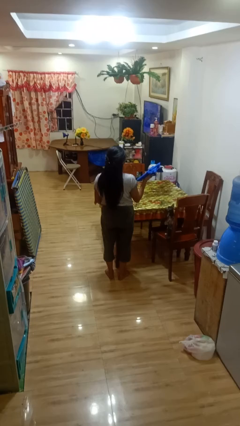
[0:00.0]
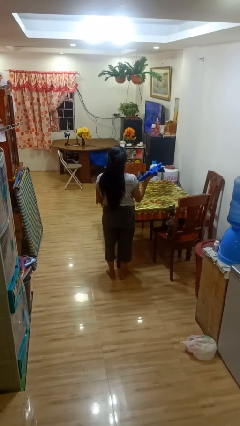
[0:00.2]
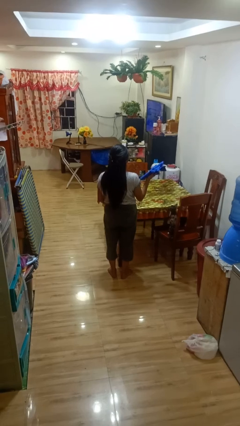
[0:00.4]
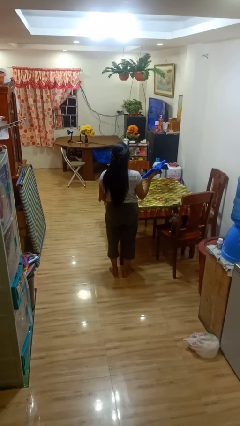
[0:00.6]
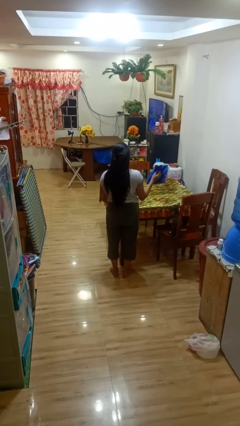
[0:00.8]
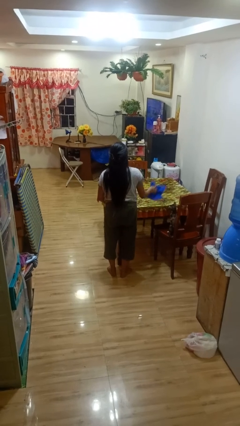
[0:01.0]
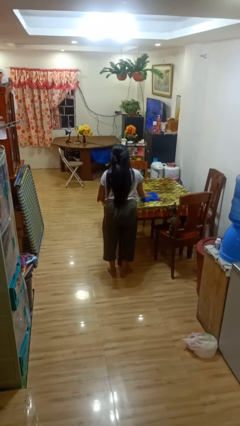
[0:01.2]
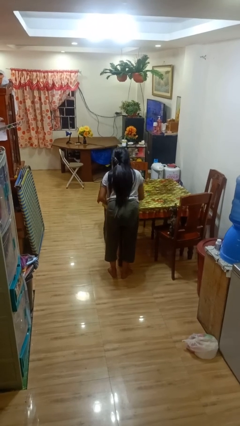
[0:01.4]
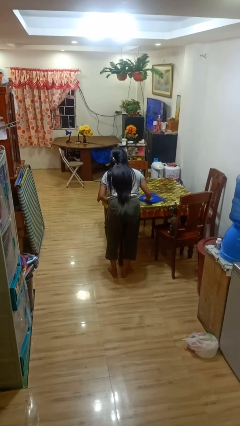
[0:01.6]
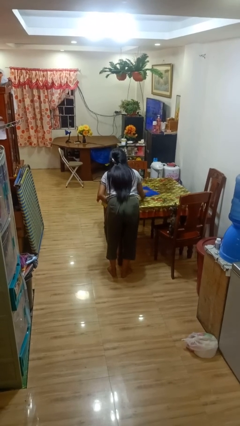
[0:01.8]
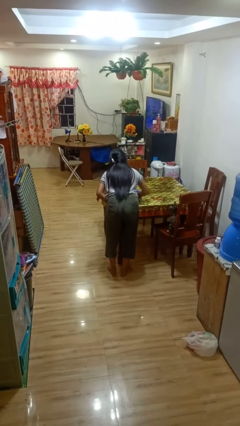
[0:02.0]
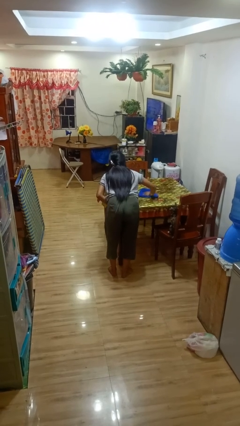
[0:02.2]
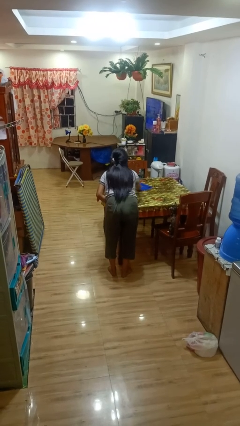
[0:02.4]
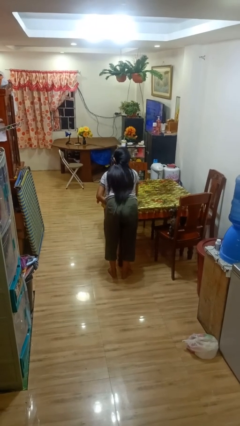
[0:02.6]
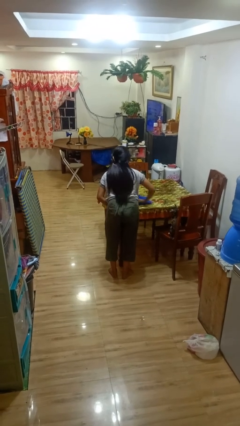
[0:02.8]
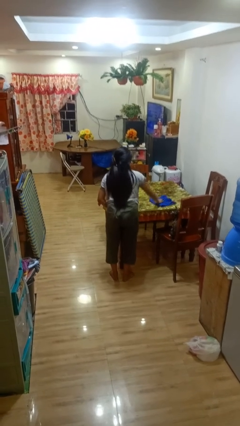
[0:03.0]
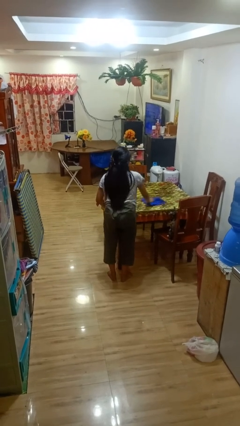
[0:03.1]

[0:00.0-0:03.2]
person cleans table with rag

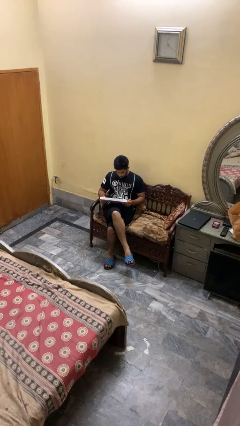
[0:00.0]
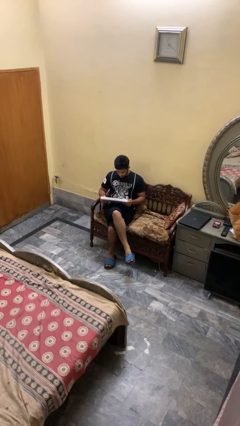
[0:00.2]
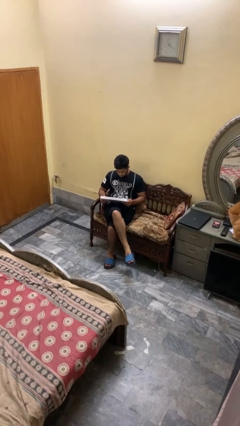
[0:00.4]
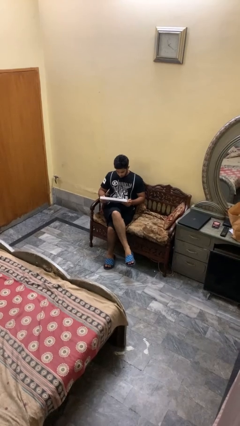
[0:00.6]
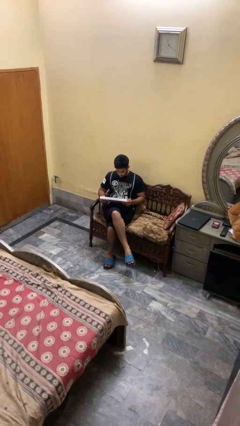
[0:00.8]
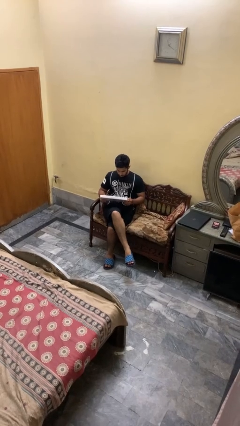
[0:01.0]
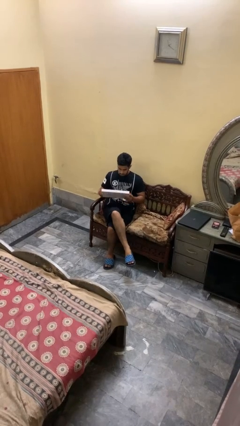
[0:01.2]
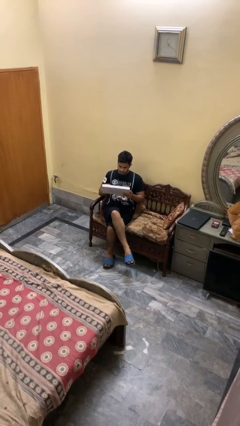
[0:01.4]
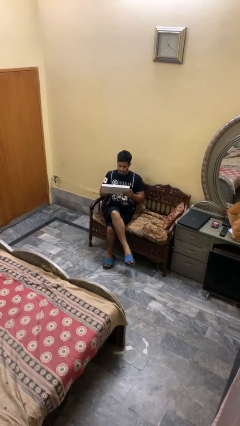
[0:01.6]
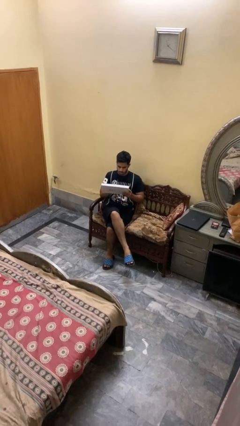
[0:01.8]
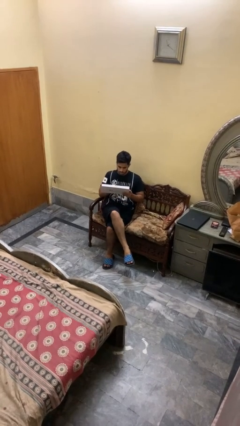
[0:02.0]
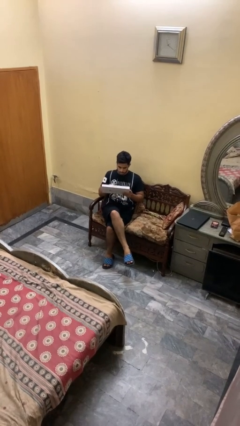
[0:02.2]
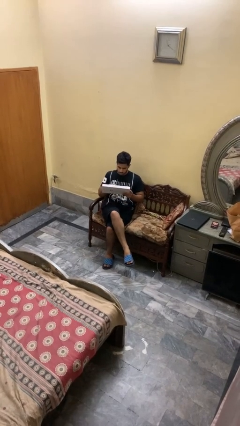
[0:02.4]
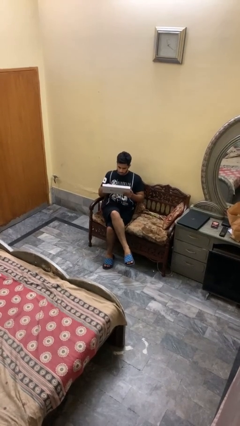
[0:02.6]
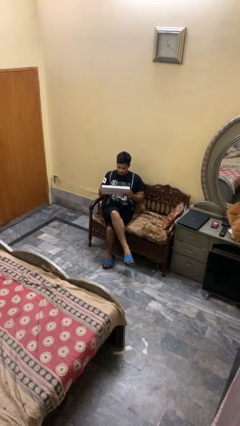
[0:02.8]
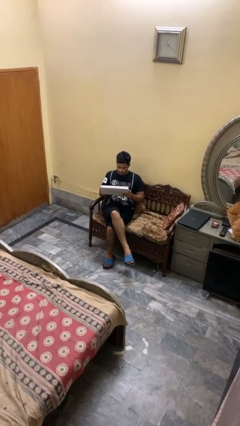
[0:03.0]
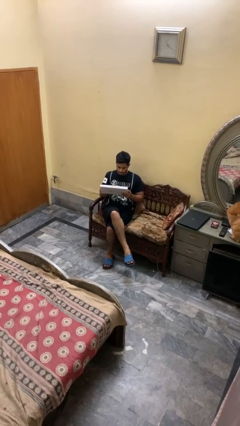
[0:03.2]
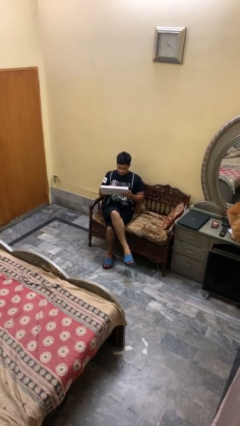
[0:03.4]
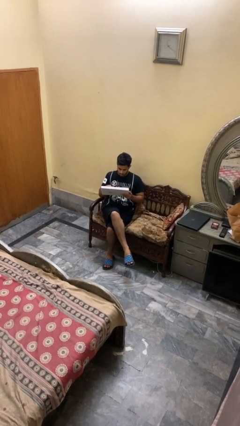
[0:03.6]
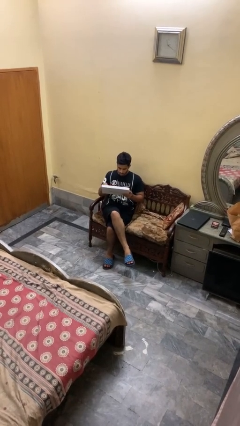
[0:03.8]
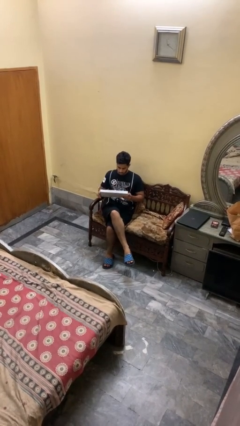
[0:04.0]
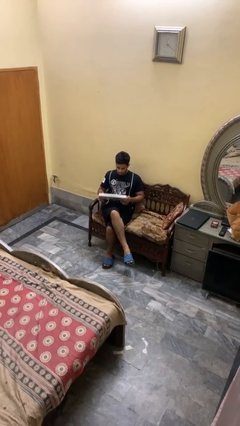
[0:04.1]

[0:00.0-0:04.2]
person interacts with tablet

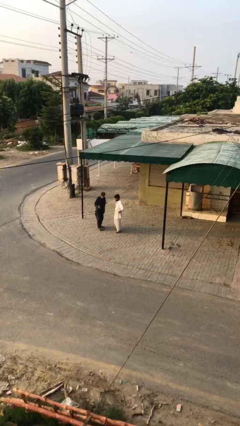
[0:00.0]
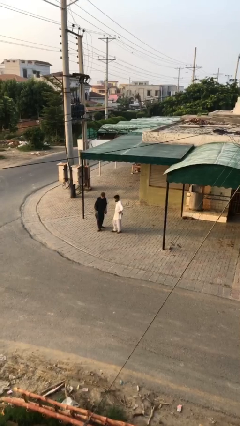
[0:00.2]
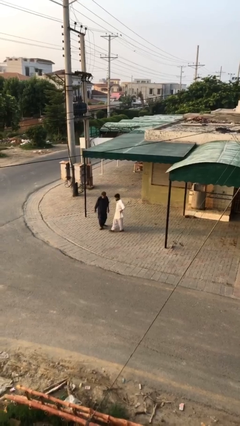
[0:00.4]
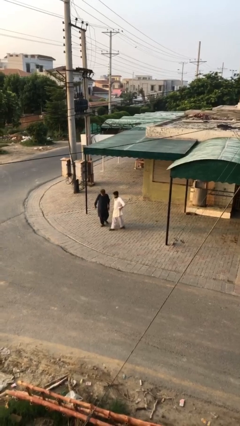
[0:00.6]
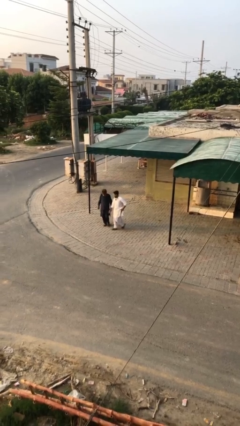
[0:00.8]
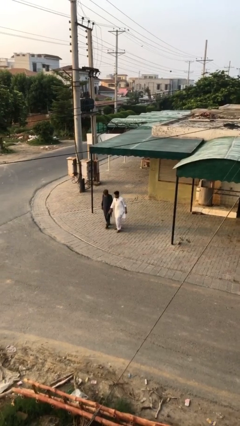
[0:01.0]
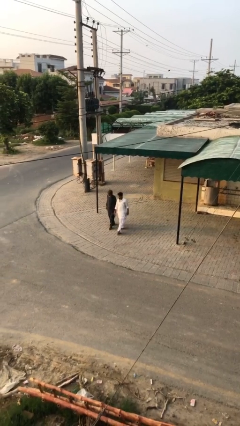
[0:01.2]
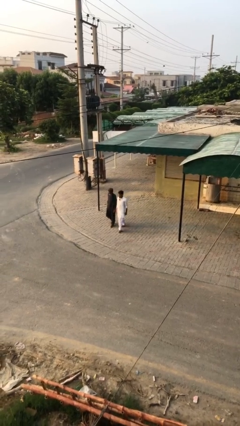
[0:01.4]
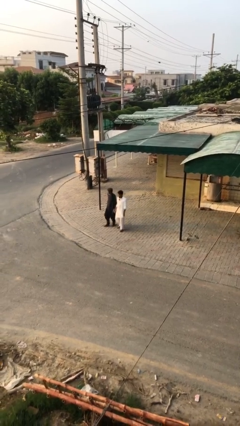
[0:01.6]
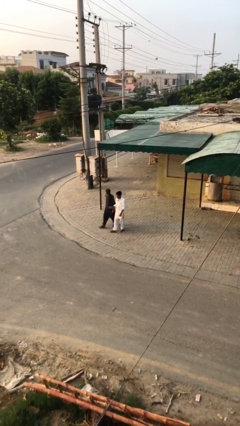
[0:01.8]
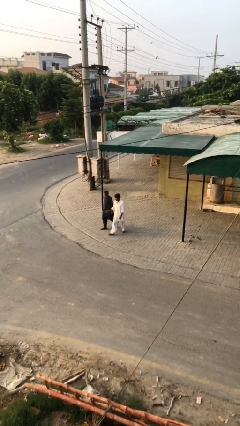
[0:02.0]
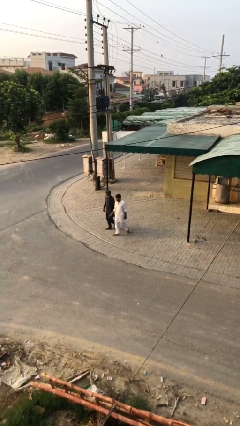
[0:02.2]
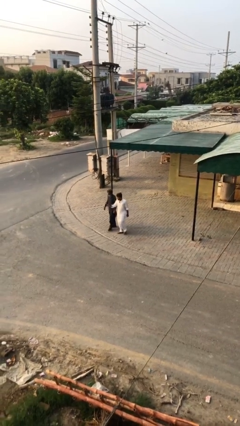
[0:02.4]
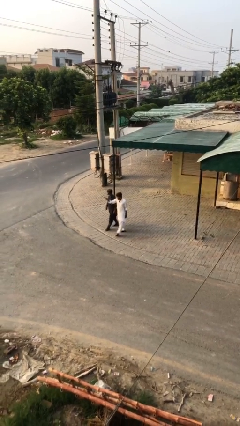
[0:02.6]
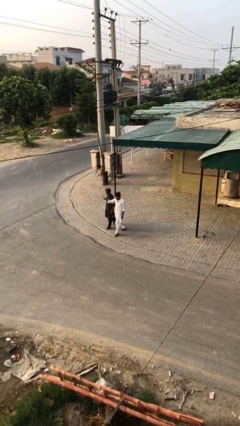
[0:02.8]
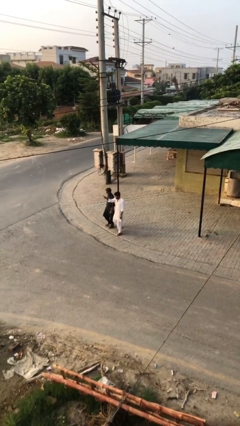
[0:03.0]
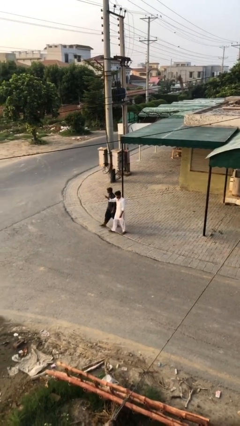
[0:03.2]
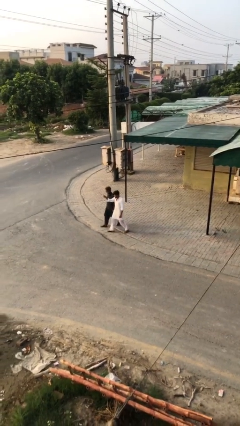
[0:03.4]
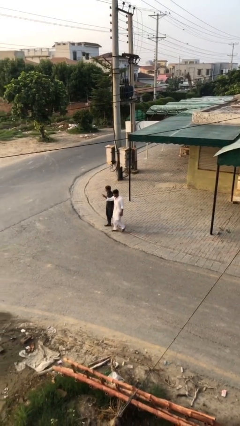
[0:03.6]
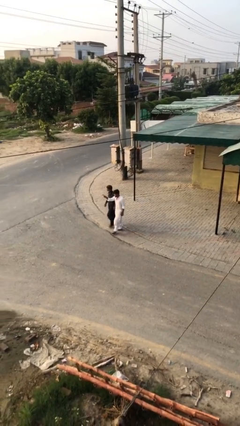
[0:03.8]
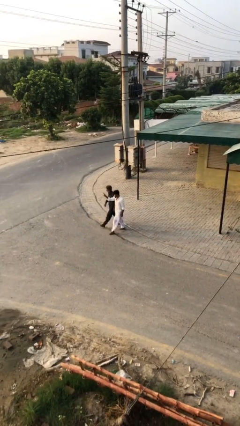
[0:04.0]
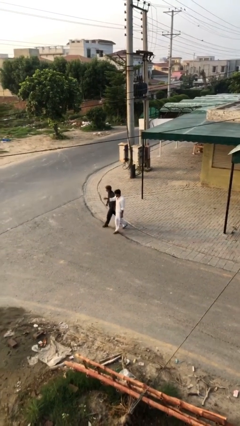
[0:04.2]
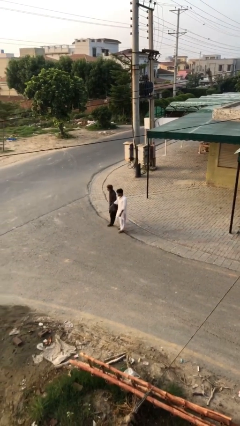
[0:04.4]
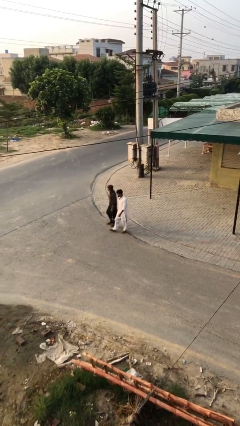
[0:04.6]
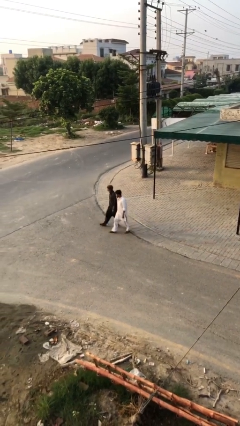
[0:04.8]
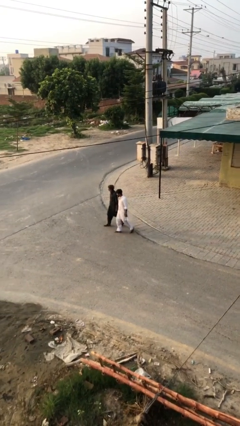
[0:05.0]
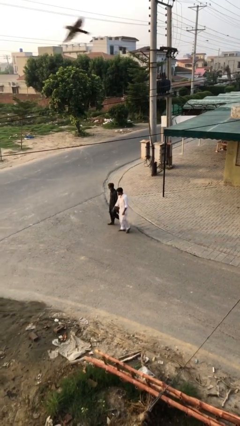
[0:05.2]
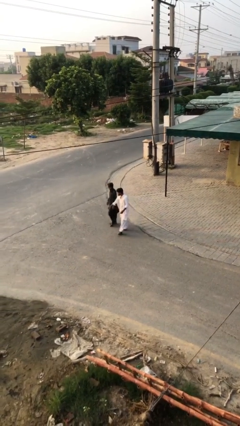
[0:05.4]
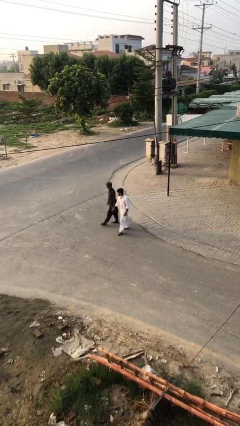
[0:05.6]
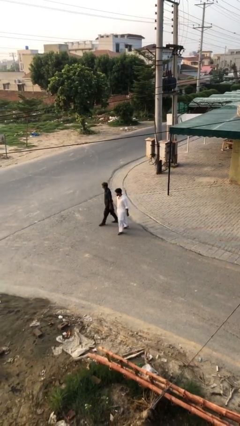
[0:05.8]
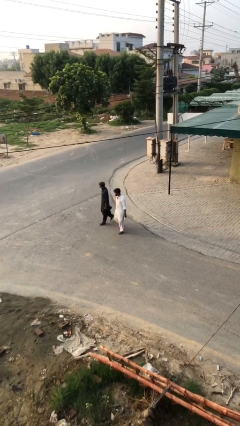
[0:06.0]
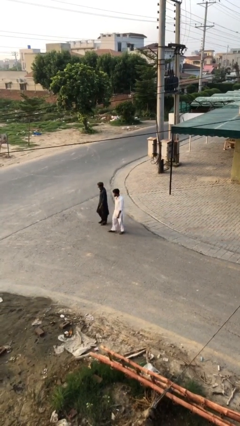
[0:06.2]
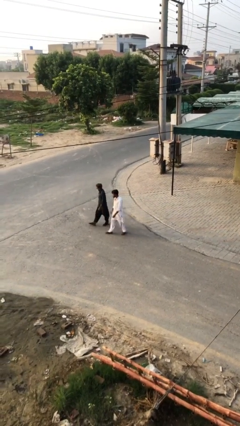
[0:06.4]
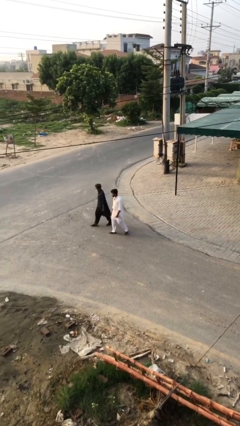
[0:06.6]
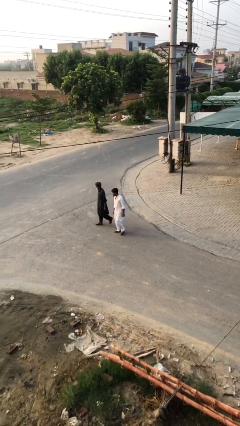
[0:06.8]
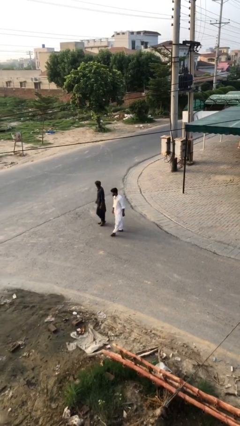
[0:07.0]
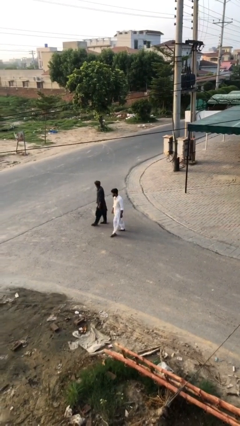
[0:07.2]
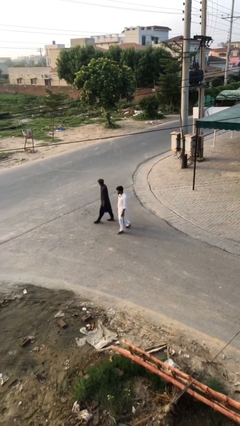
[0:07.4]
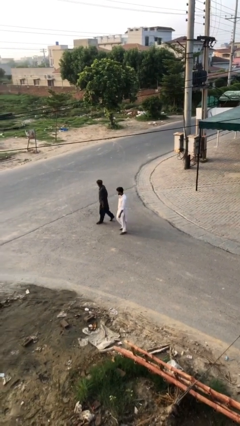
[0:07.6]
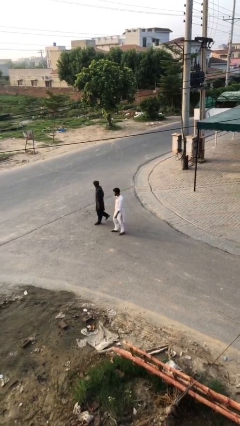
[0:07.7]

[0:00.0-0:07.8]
person talks to person

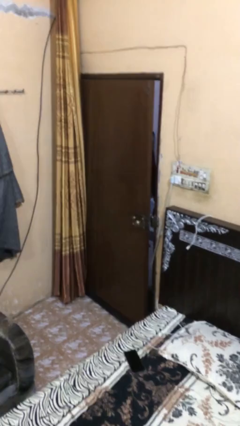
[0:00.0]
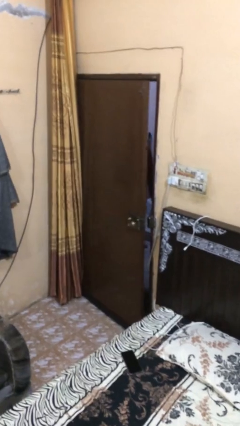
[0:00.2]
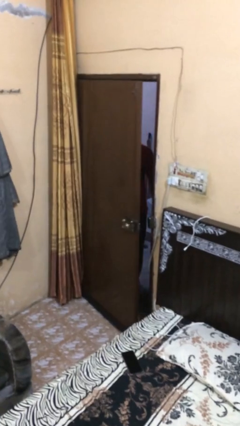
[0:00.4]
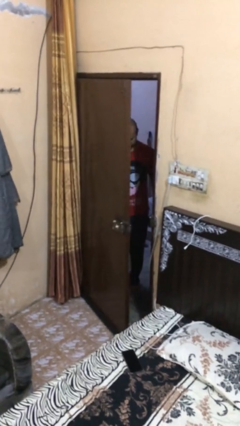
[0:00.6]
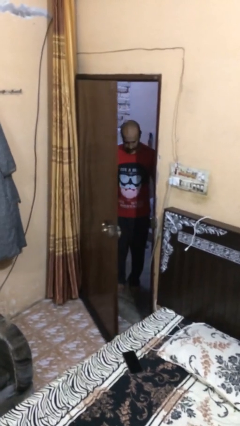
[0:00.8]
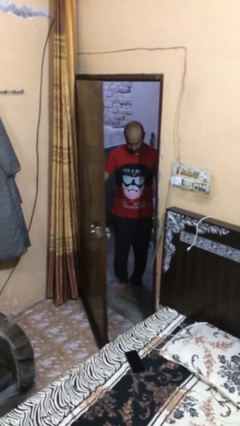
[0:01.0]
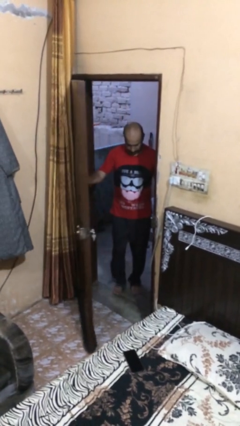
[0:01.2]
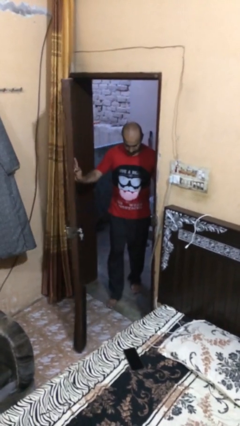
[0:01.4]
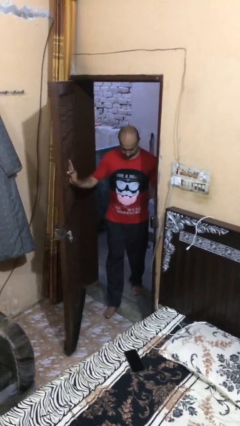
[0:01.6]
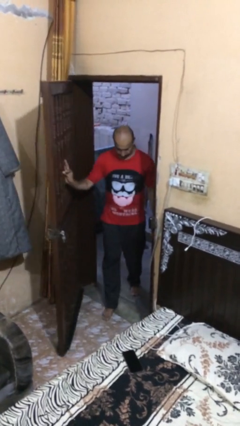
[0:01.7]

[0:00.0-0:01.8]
person opens facility door

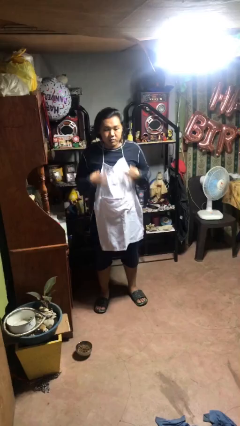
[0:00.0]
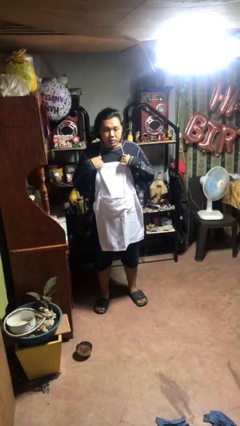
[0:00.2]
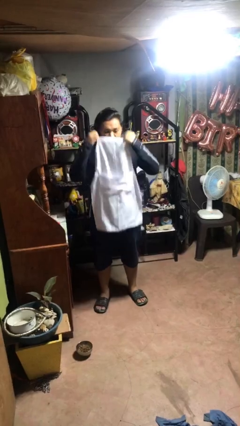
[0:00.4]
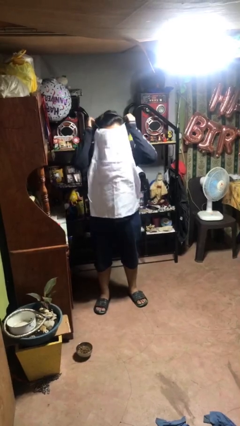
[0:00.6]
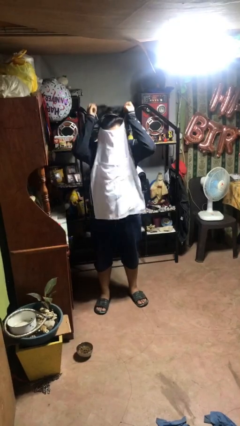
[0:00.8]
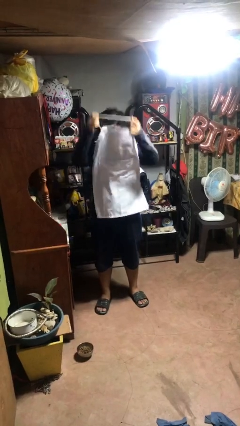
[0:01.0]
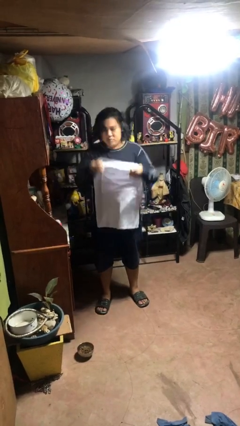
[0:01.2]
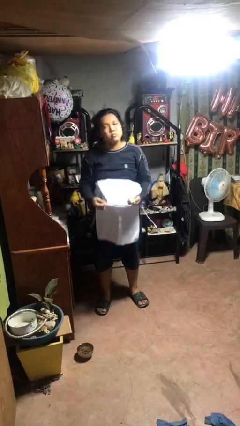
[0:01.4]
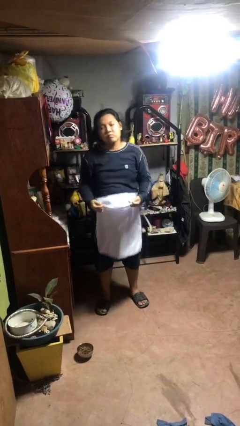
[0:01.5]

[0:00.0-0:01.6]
person takes off apron
